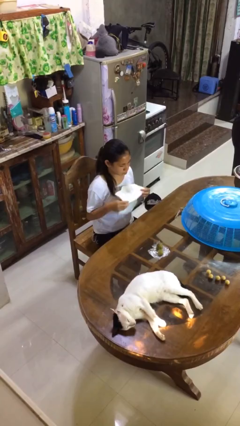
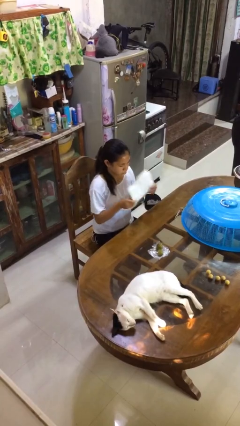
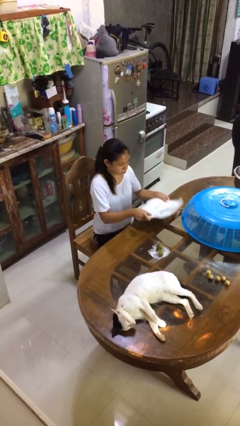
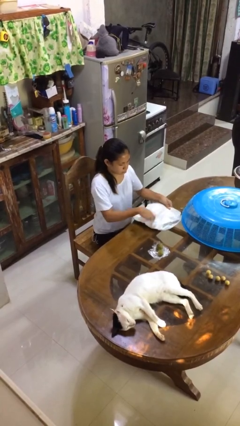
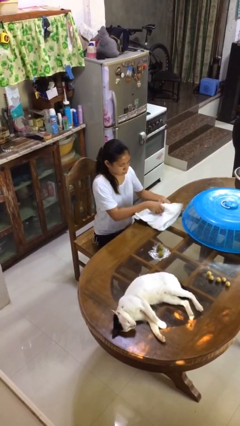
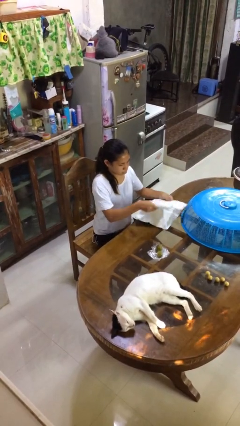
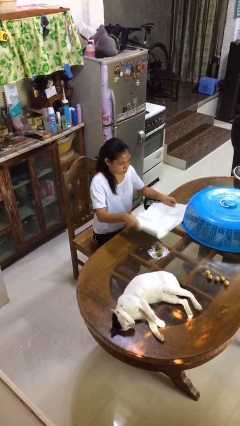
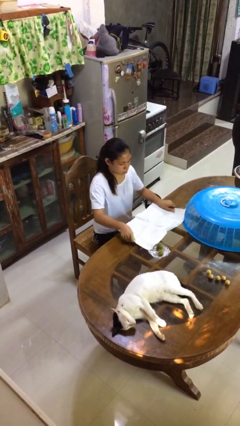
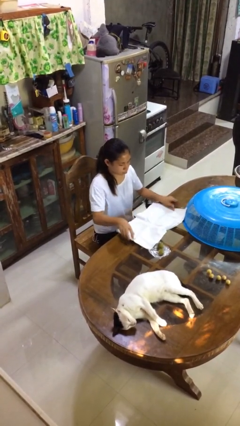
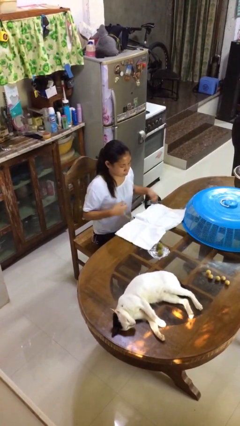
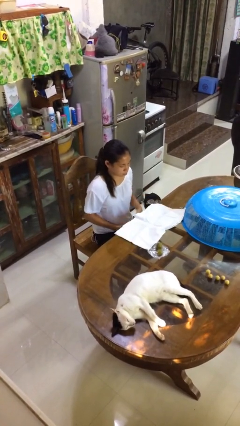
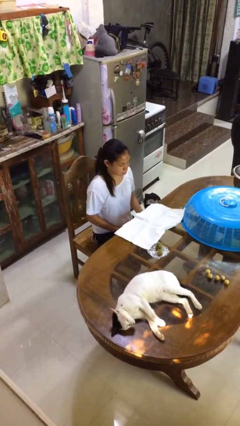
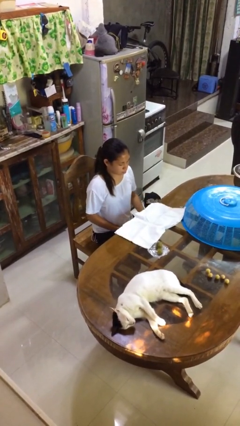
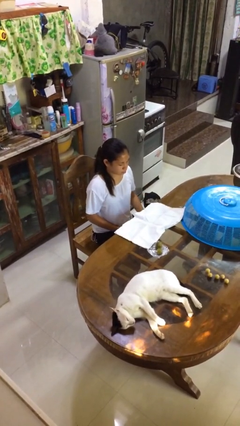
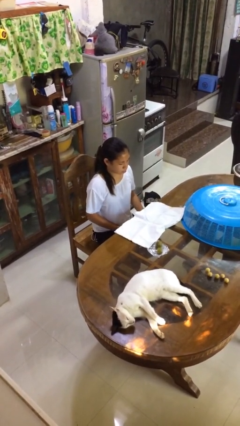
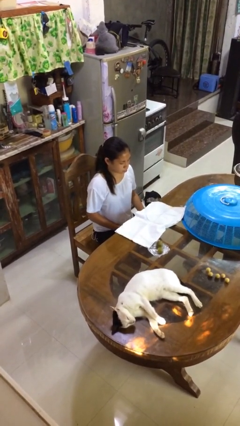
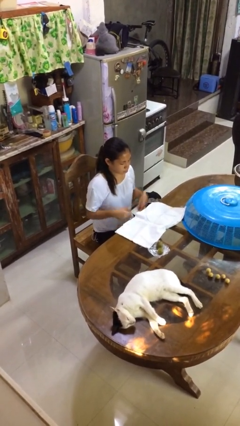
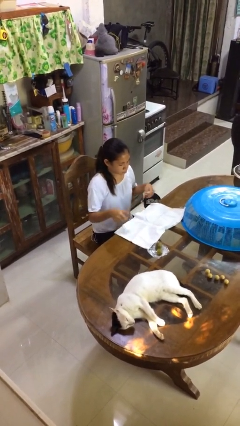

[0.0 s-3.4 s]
person spreads tablecloth

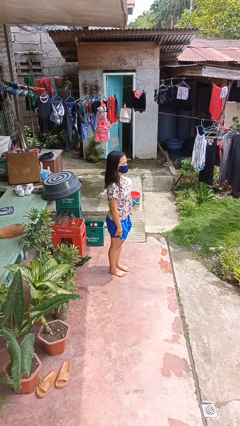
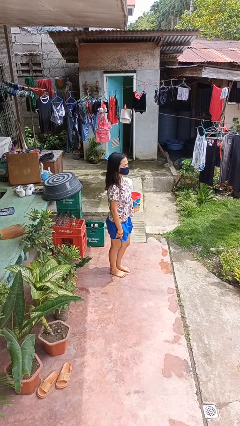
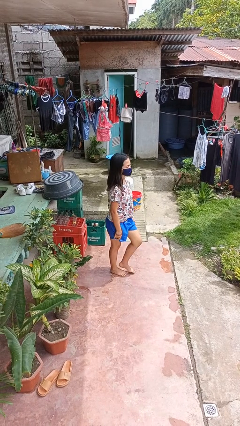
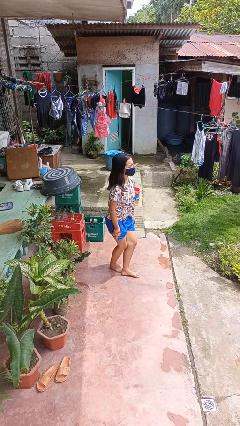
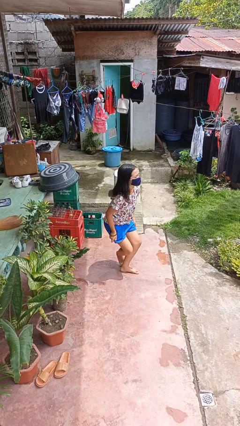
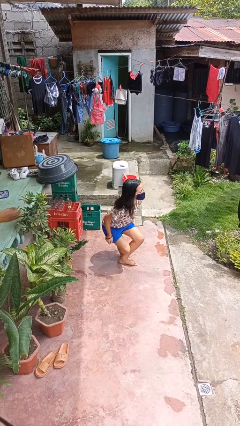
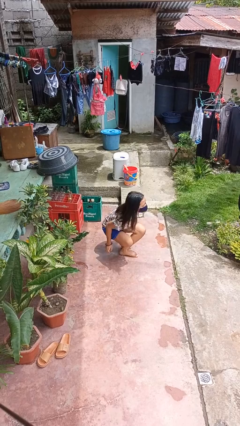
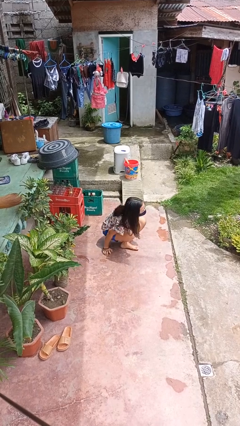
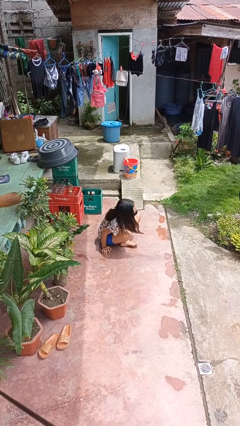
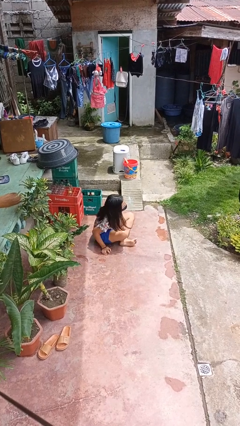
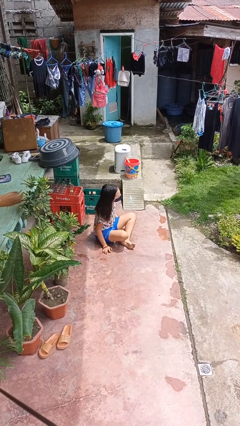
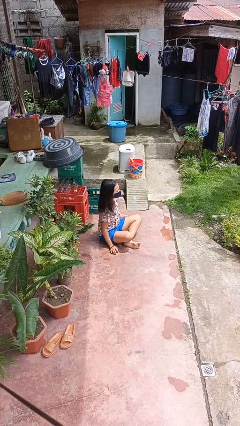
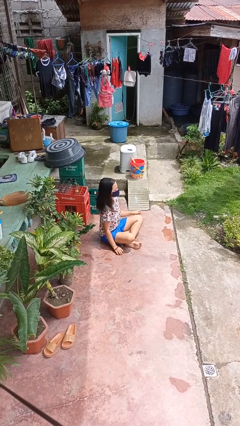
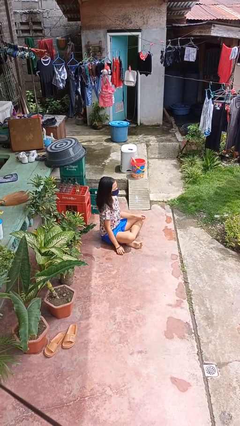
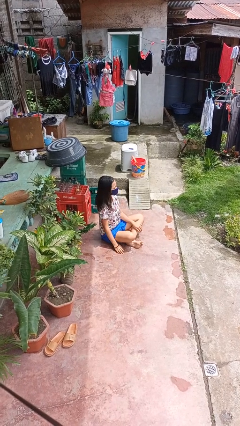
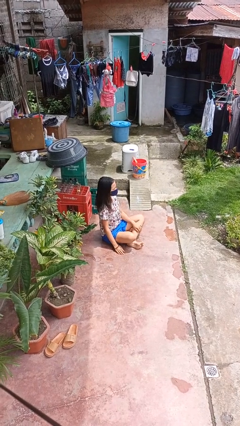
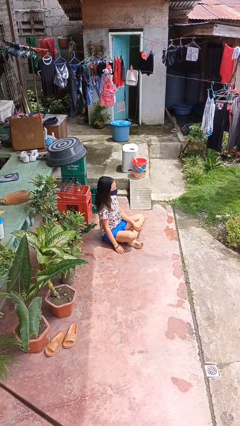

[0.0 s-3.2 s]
person sits crisscross

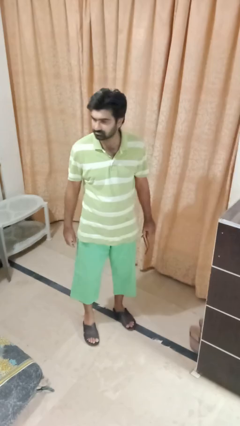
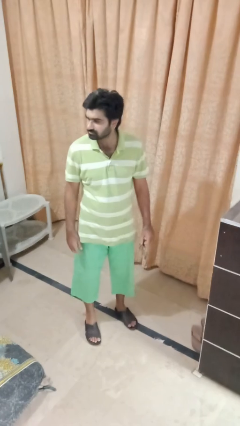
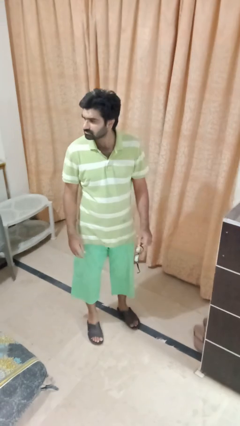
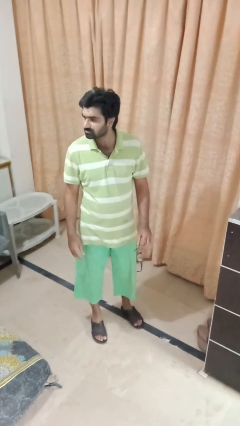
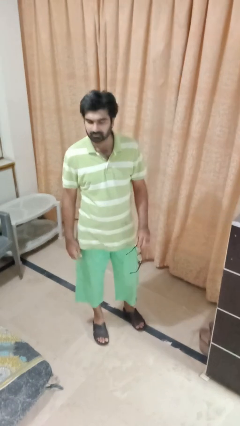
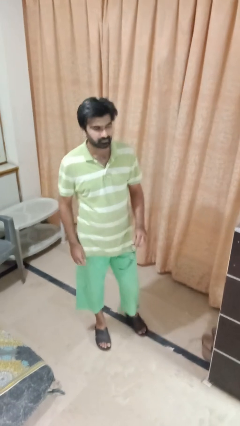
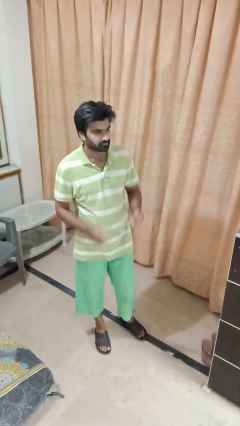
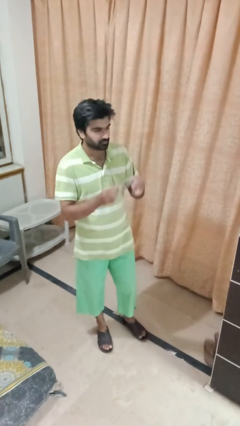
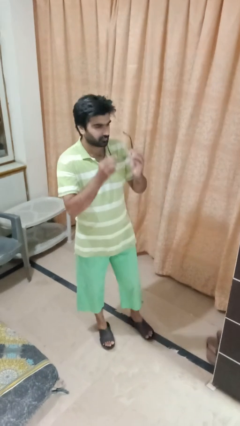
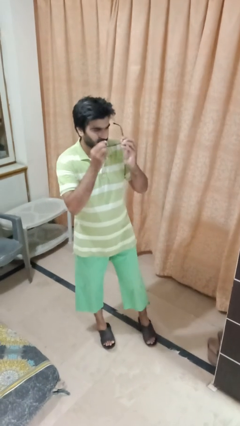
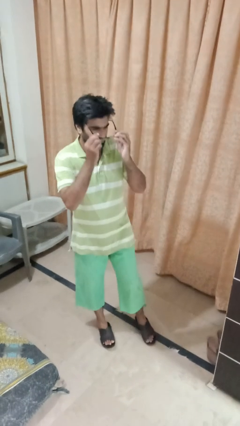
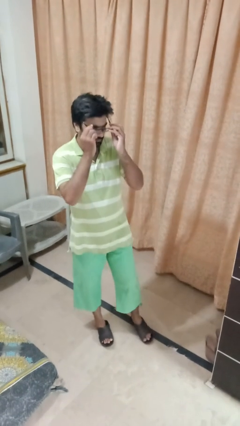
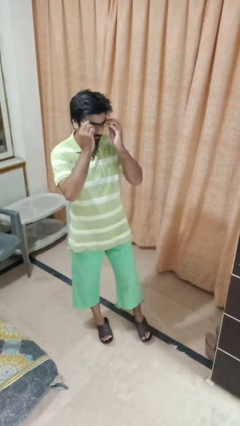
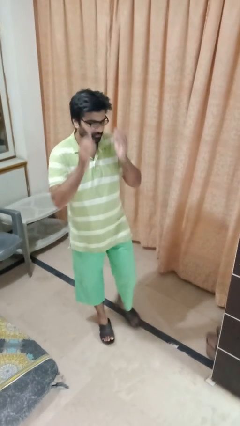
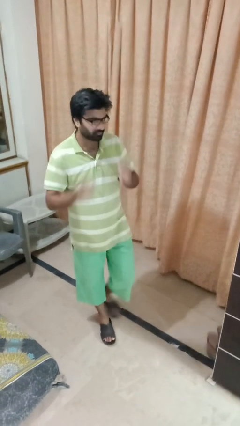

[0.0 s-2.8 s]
person puts on glasses

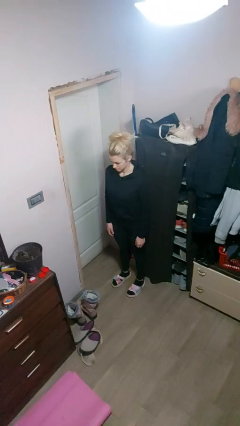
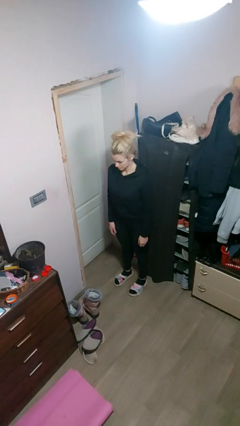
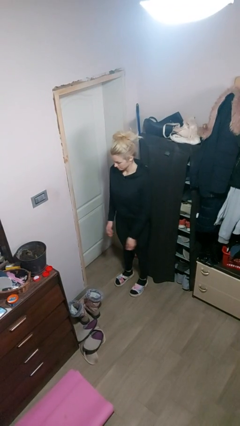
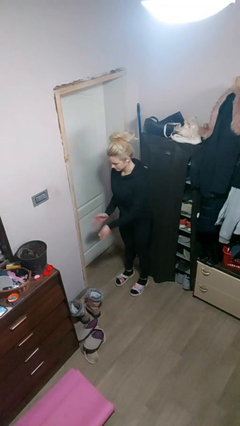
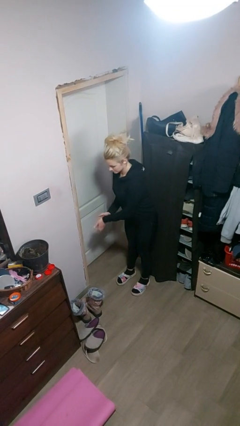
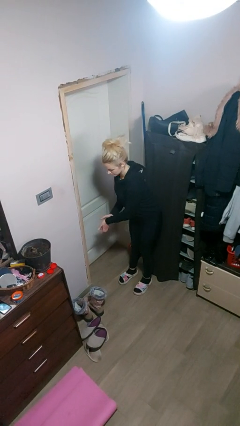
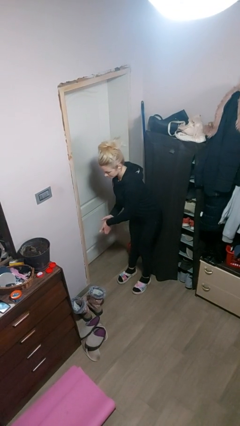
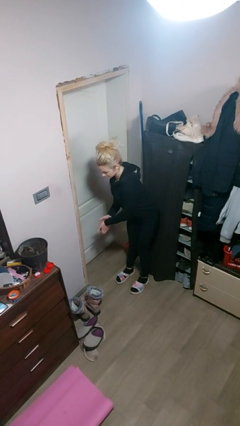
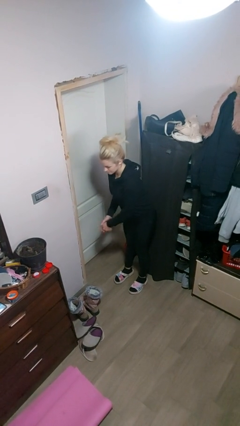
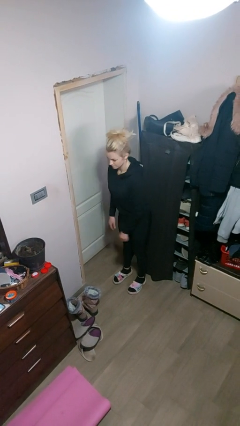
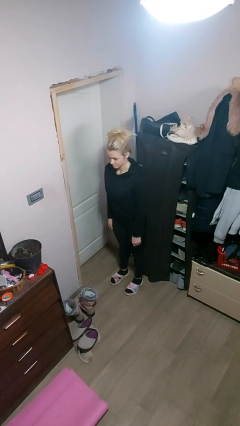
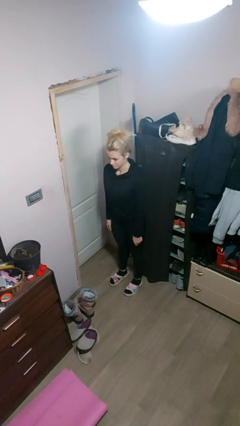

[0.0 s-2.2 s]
person claps hands

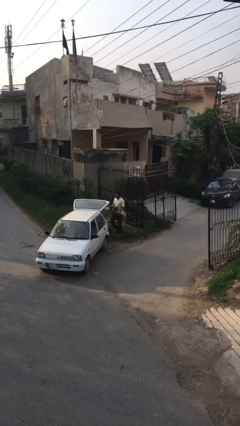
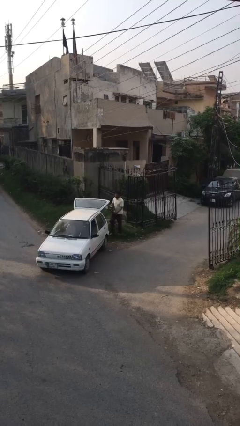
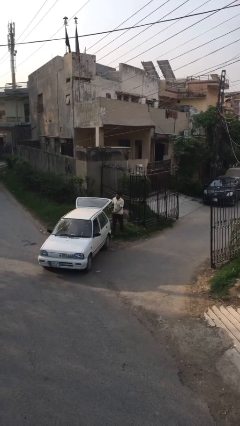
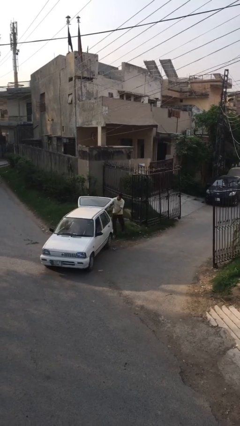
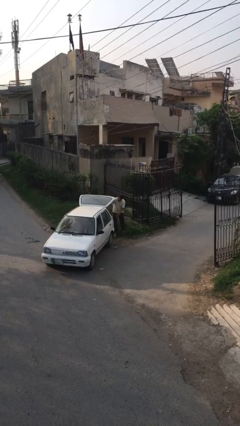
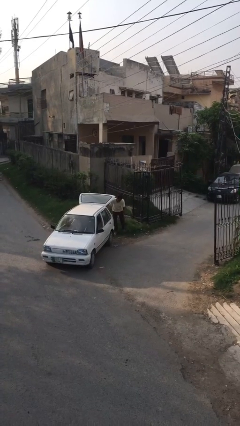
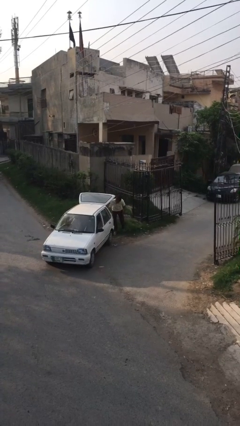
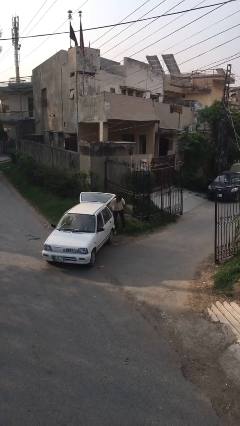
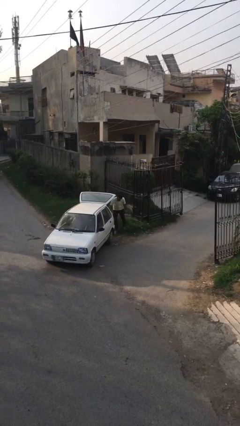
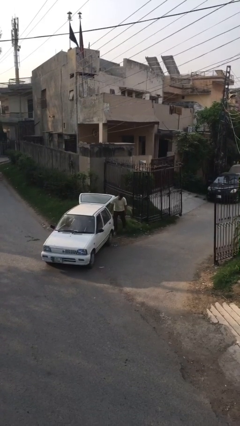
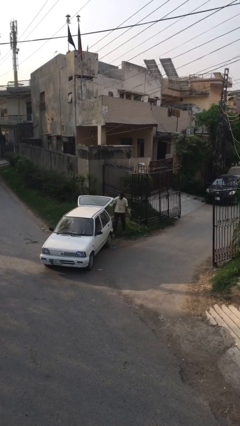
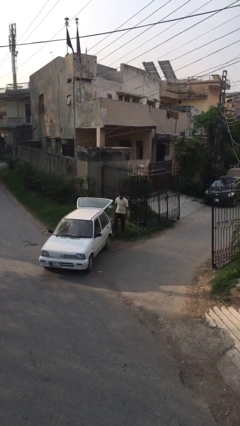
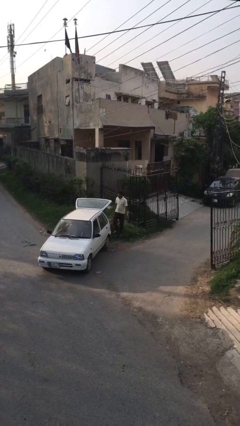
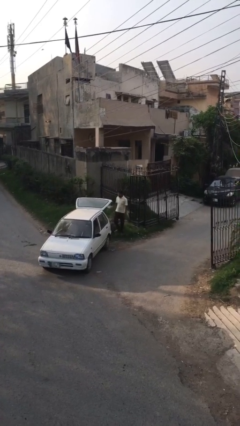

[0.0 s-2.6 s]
person loads car

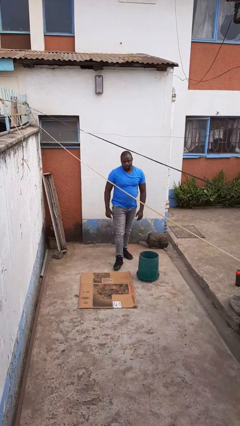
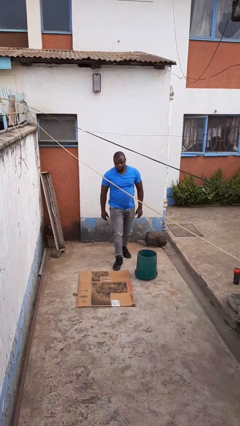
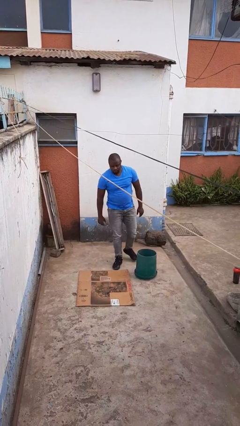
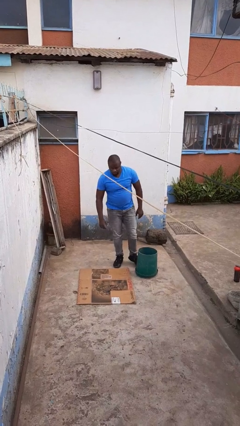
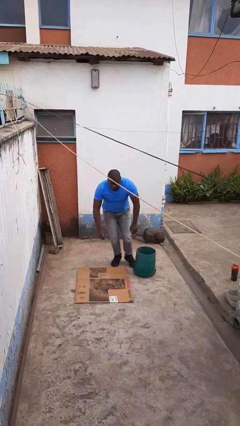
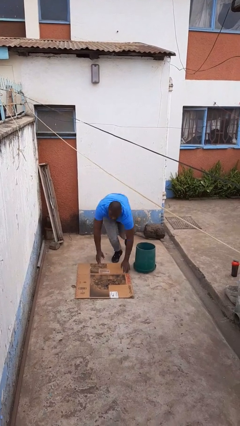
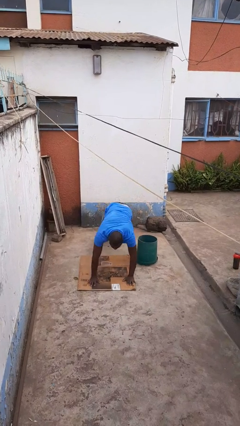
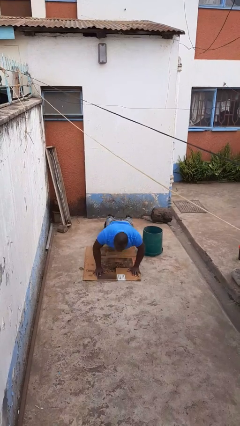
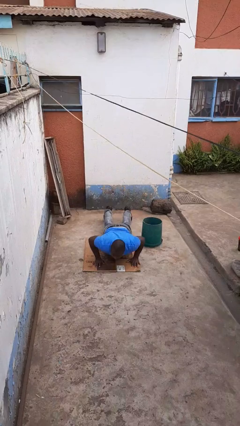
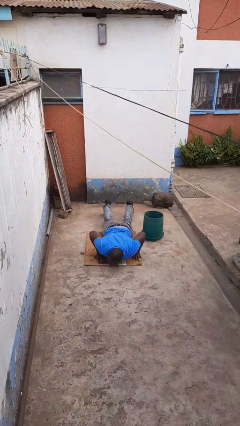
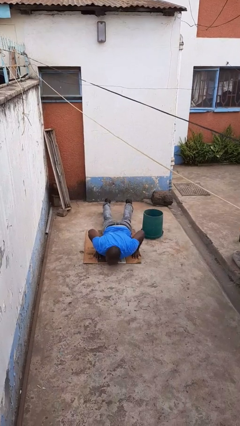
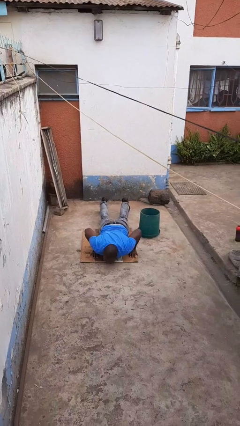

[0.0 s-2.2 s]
person trips on object on floor

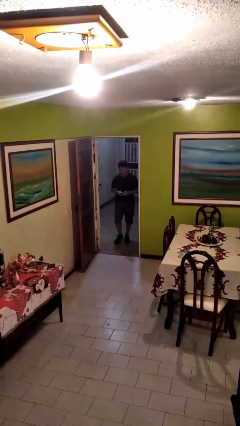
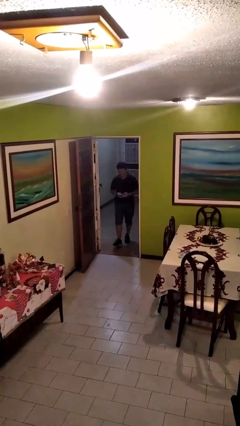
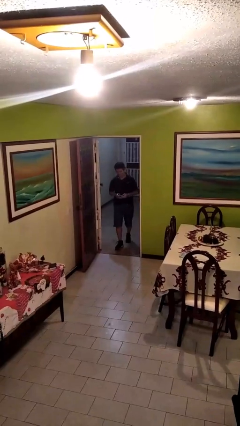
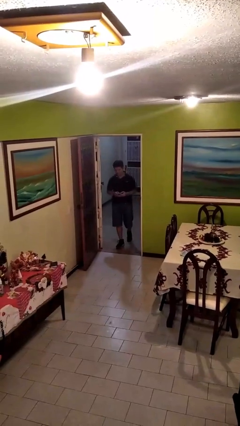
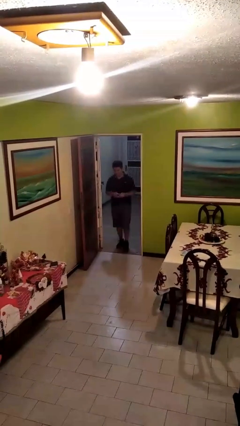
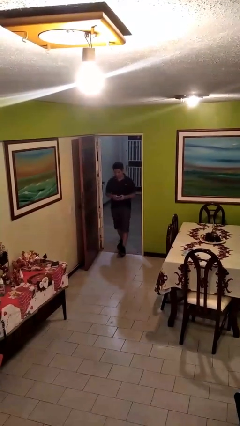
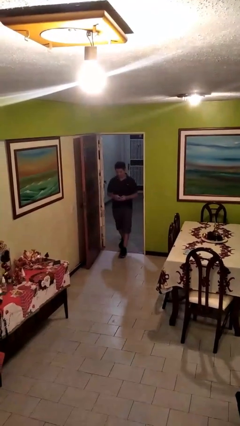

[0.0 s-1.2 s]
person enters scene through structure
